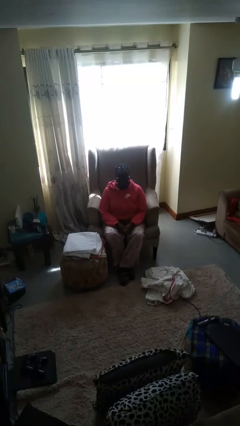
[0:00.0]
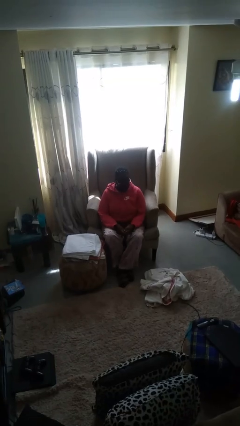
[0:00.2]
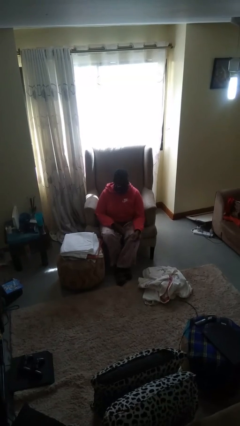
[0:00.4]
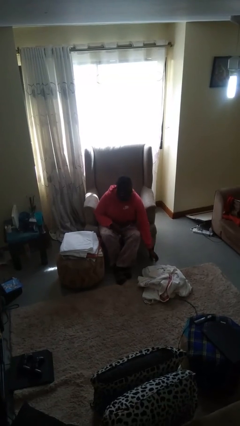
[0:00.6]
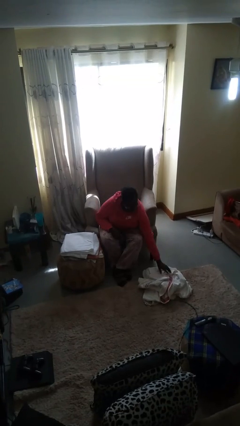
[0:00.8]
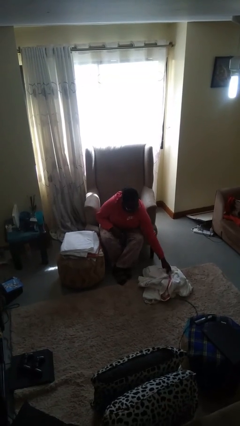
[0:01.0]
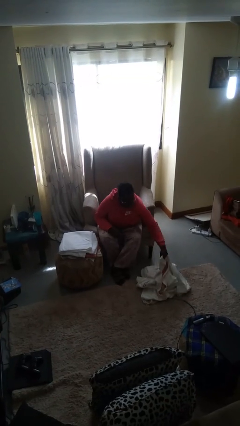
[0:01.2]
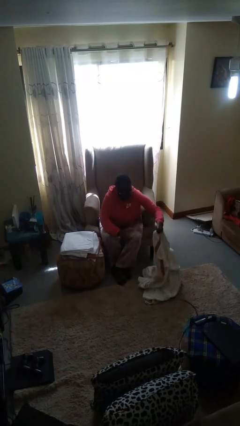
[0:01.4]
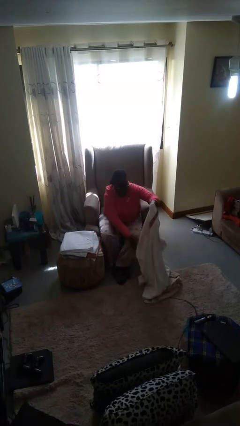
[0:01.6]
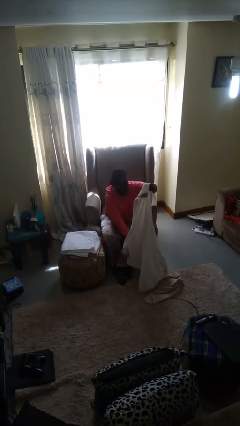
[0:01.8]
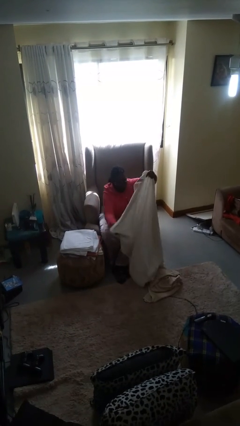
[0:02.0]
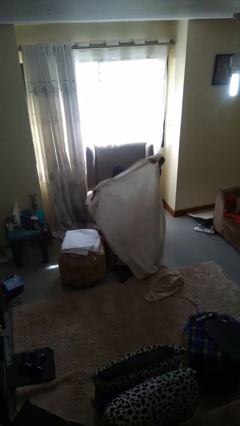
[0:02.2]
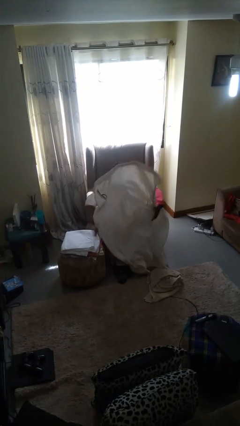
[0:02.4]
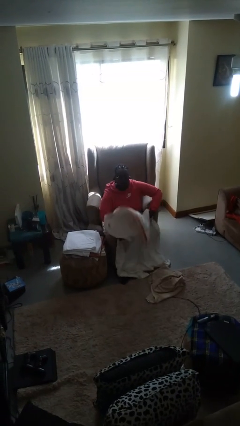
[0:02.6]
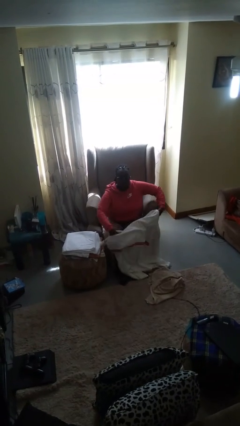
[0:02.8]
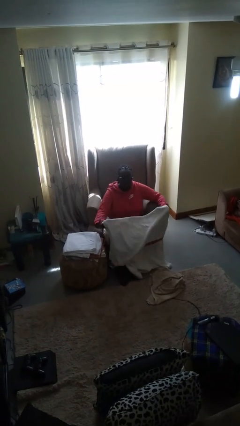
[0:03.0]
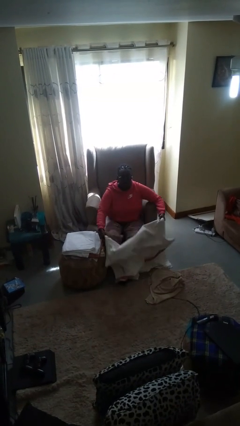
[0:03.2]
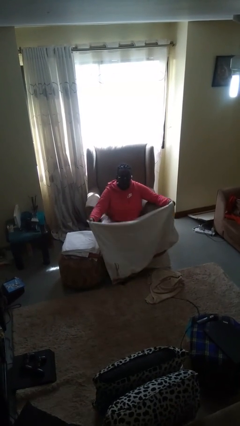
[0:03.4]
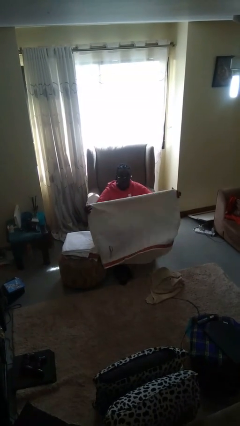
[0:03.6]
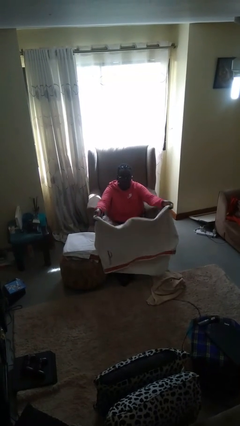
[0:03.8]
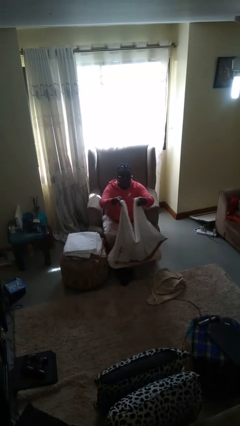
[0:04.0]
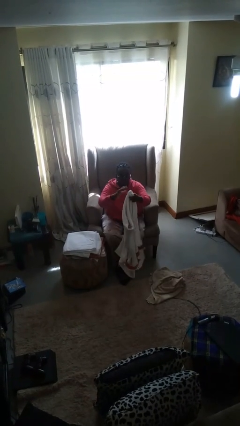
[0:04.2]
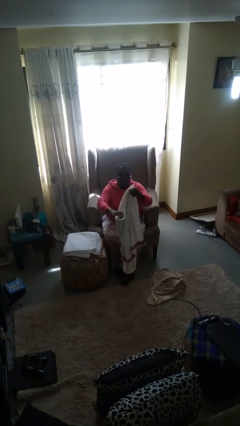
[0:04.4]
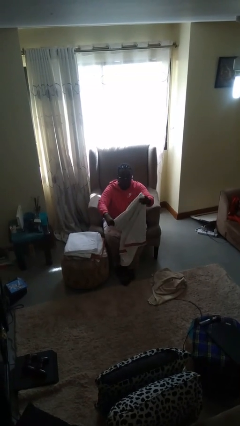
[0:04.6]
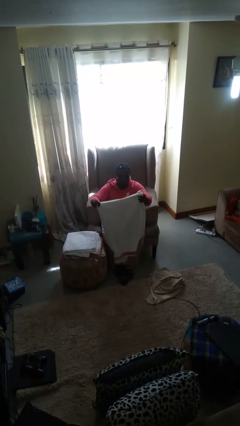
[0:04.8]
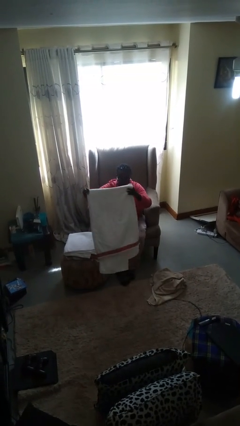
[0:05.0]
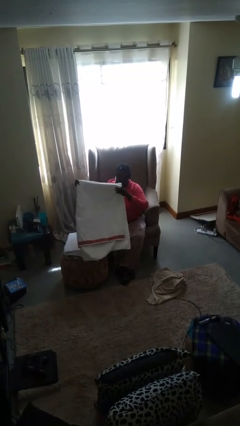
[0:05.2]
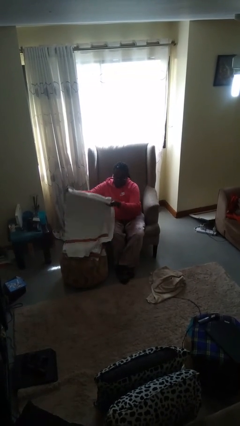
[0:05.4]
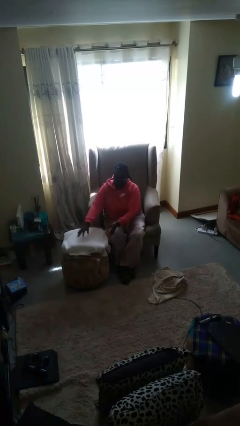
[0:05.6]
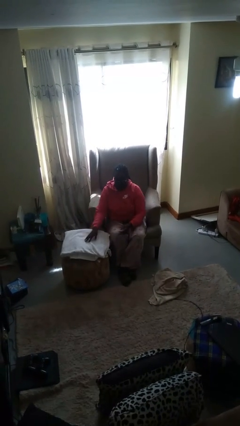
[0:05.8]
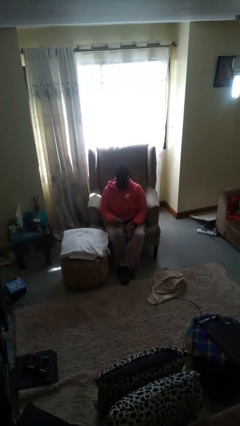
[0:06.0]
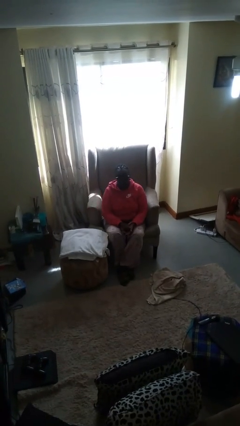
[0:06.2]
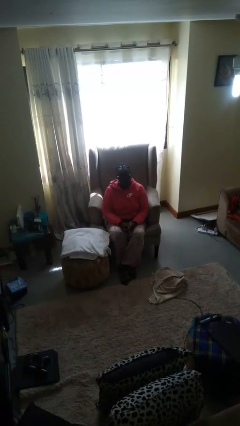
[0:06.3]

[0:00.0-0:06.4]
person folds towel

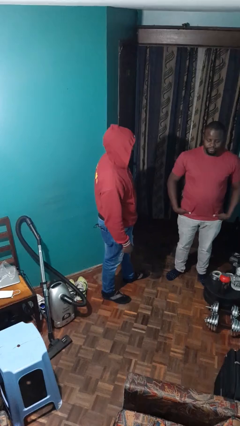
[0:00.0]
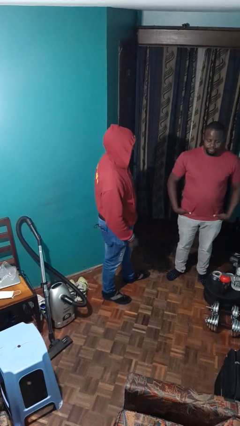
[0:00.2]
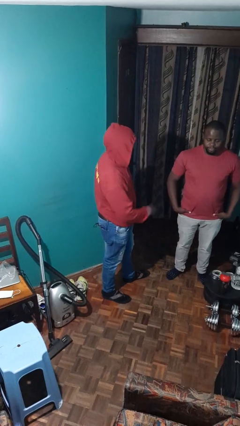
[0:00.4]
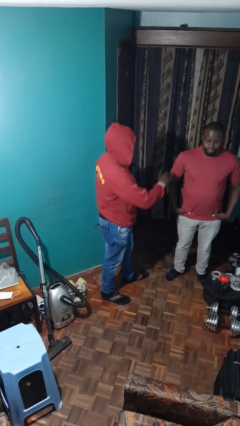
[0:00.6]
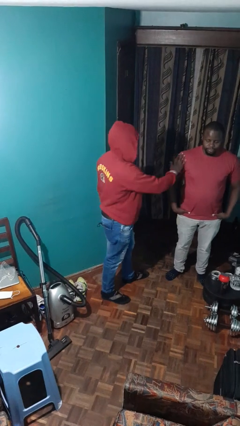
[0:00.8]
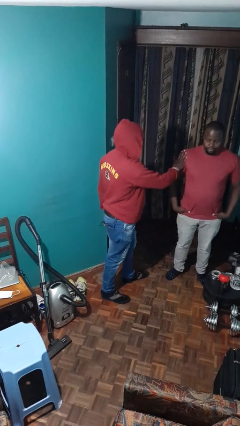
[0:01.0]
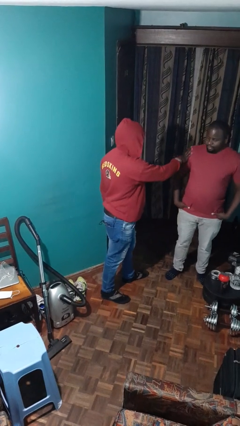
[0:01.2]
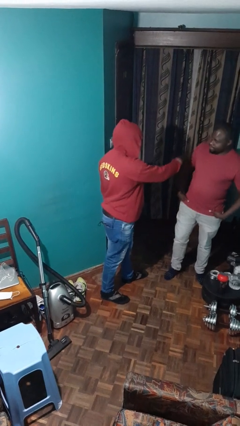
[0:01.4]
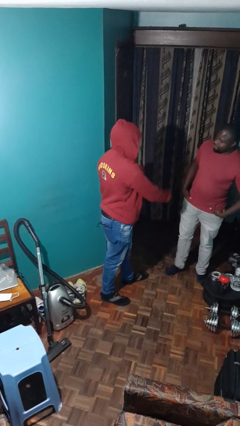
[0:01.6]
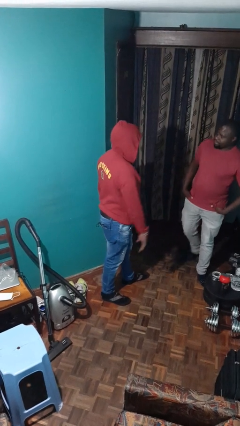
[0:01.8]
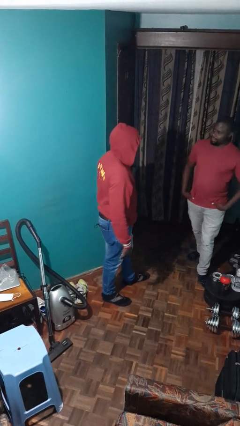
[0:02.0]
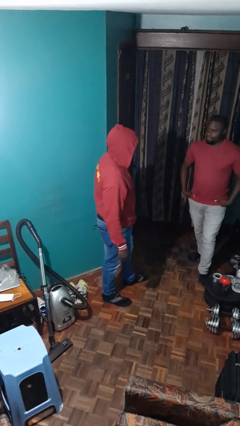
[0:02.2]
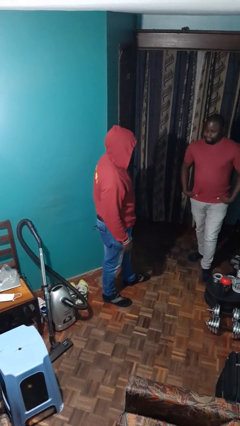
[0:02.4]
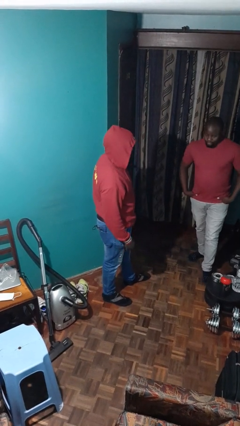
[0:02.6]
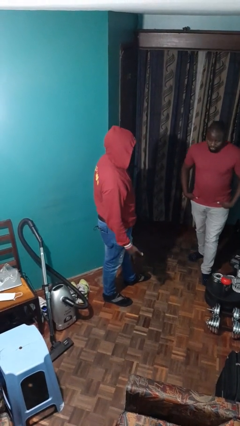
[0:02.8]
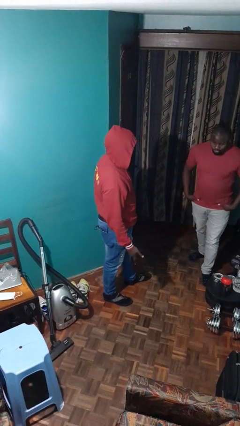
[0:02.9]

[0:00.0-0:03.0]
person shoves person

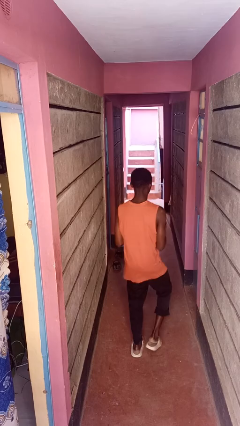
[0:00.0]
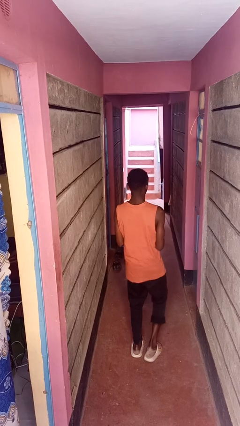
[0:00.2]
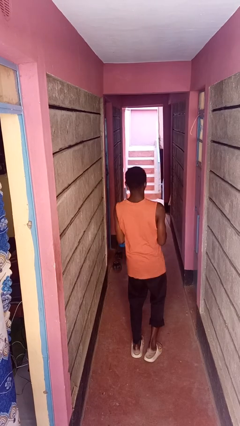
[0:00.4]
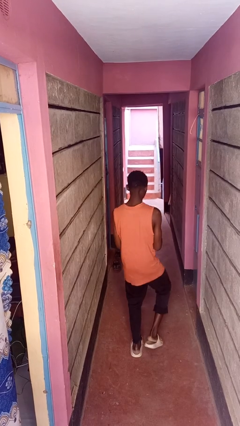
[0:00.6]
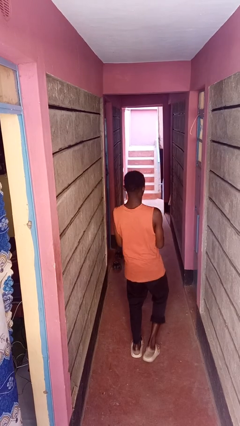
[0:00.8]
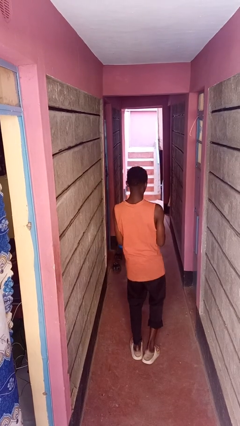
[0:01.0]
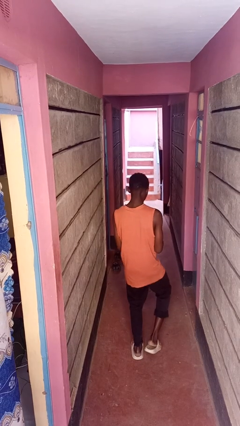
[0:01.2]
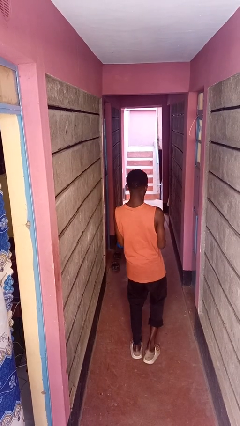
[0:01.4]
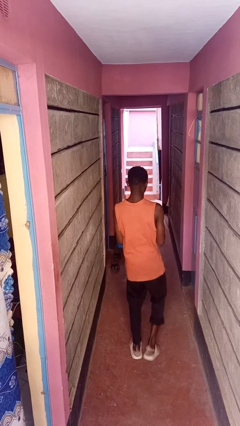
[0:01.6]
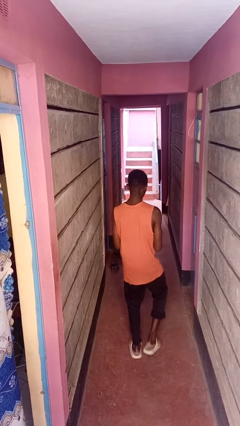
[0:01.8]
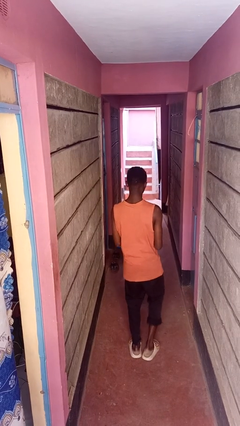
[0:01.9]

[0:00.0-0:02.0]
person dances in place

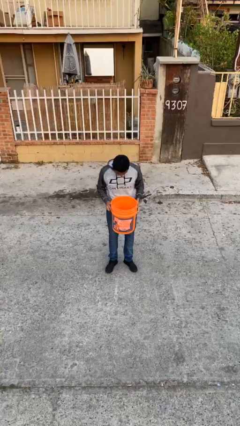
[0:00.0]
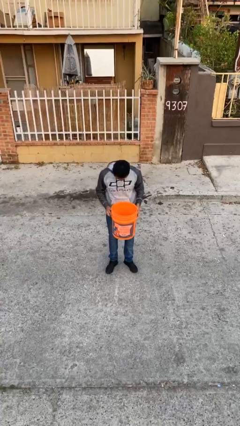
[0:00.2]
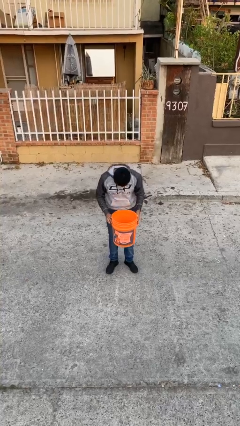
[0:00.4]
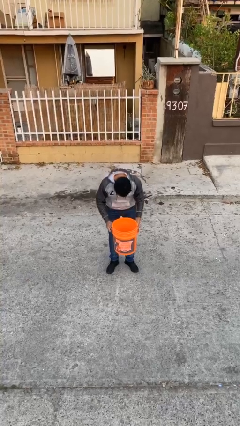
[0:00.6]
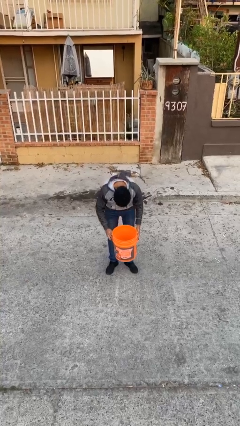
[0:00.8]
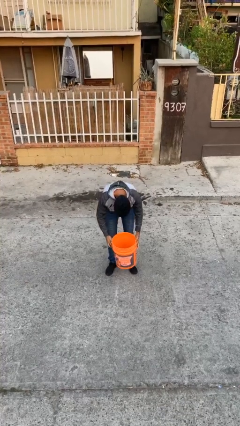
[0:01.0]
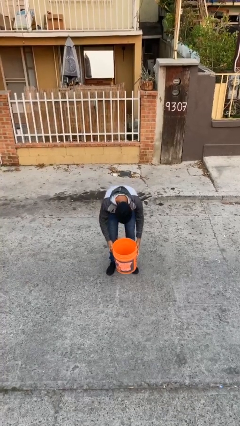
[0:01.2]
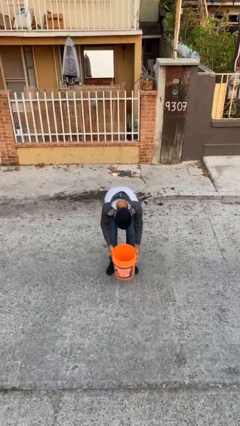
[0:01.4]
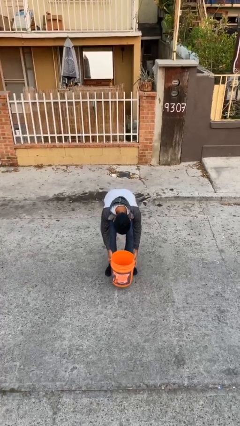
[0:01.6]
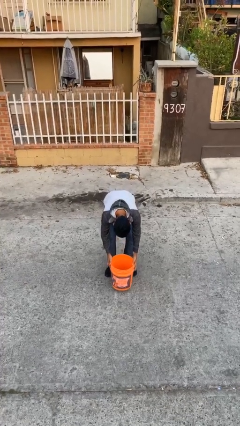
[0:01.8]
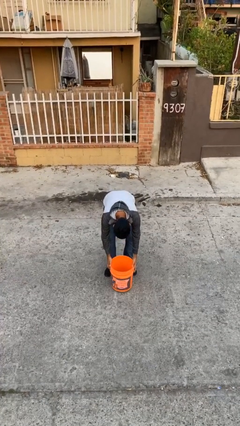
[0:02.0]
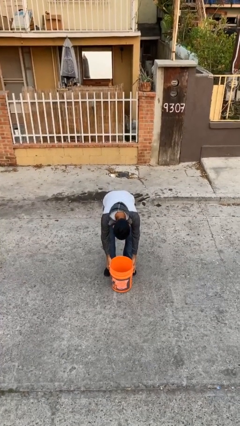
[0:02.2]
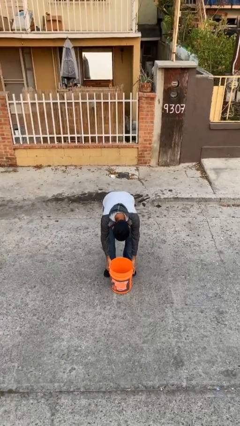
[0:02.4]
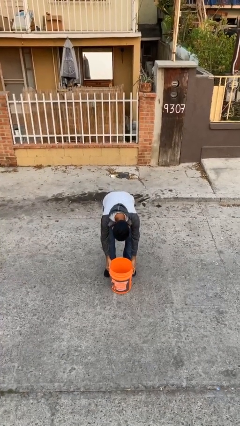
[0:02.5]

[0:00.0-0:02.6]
person puts down object on floor

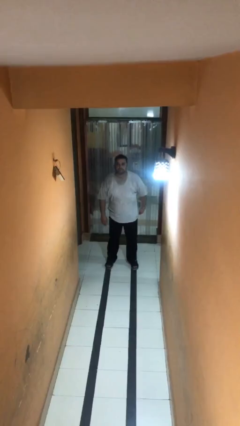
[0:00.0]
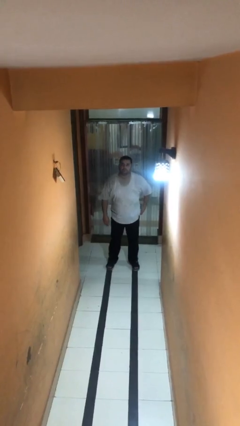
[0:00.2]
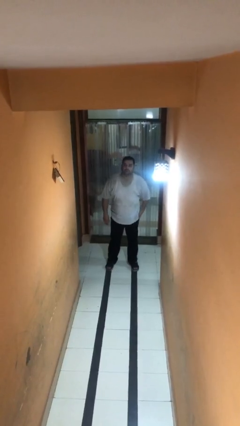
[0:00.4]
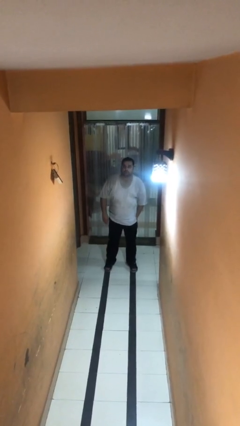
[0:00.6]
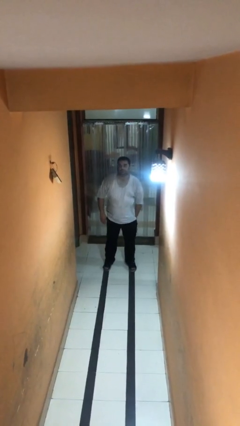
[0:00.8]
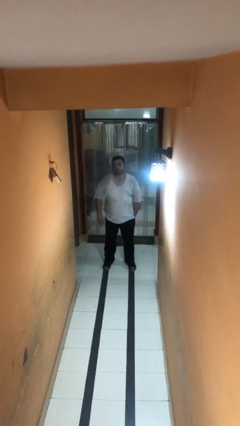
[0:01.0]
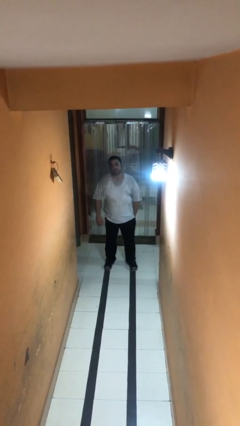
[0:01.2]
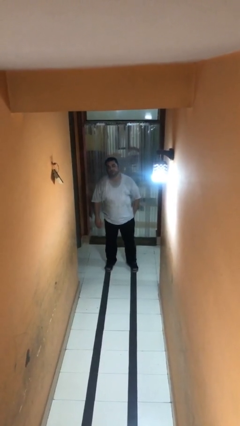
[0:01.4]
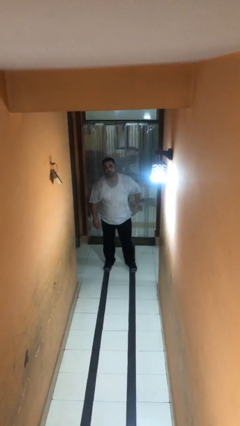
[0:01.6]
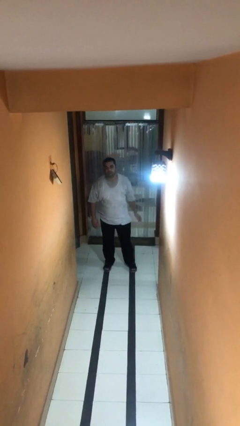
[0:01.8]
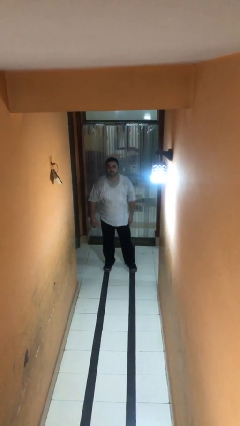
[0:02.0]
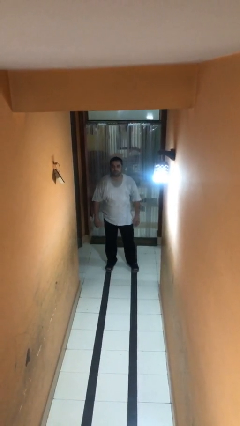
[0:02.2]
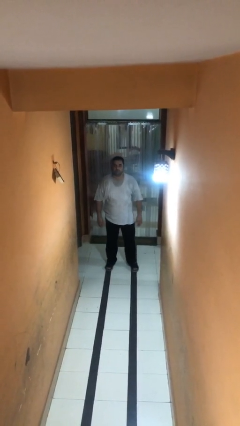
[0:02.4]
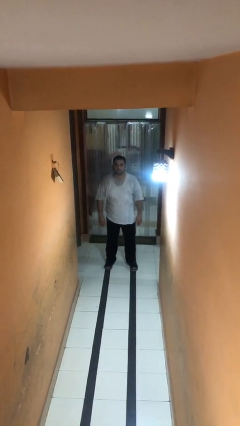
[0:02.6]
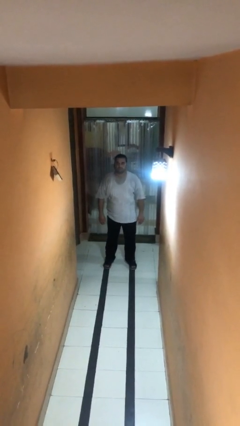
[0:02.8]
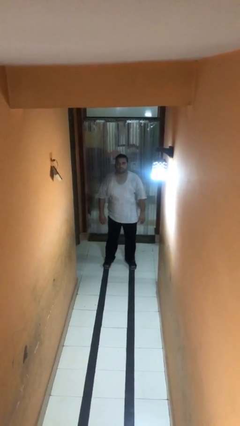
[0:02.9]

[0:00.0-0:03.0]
person puts hands in back pockets

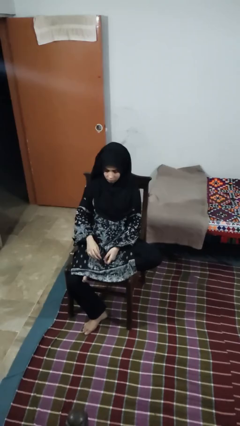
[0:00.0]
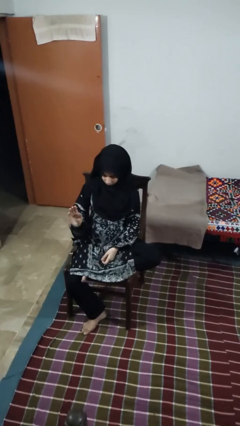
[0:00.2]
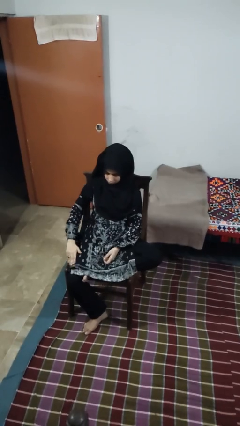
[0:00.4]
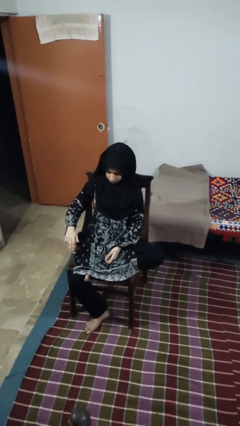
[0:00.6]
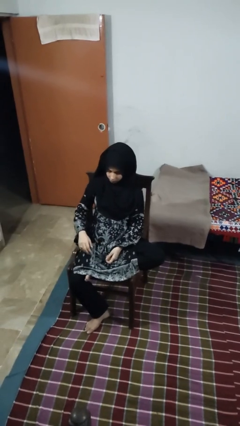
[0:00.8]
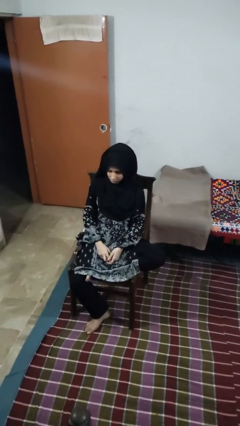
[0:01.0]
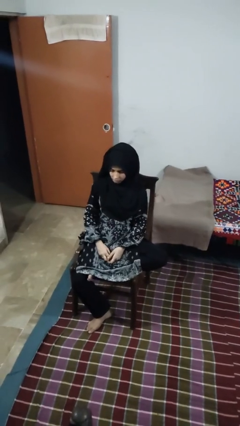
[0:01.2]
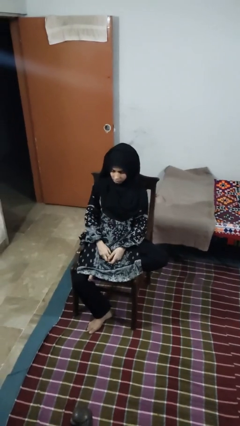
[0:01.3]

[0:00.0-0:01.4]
person swats bug
